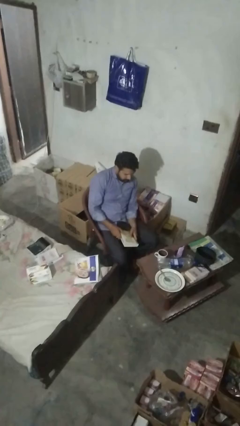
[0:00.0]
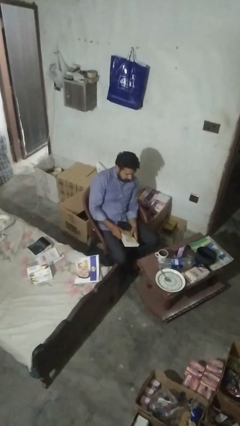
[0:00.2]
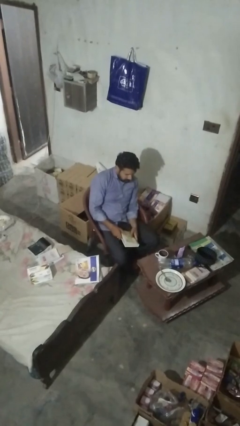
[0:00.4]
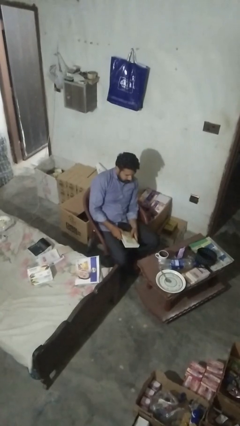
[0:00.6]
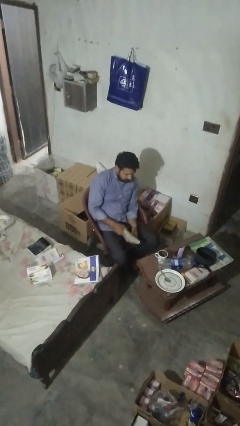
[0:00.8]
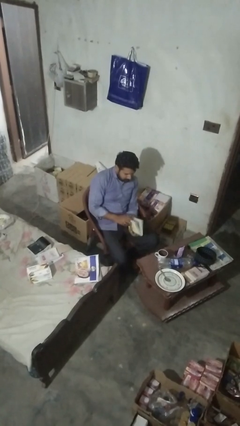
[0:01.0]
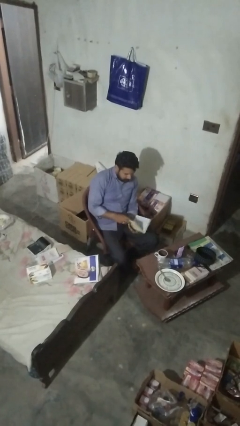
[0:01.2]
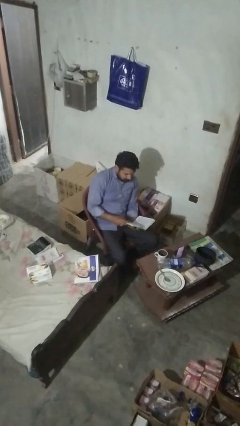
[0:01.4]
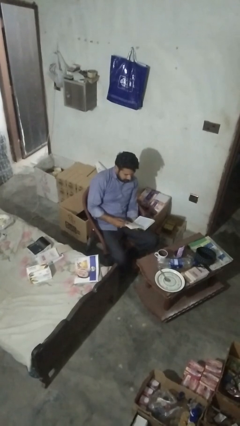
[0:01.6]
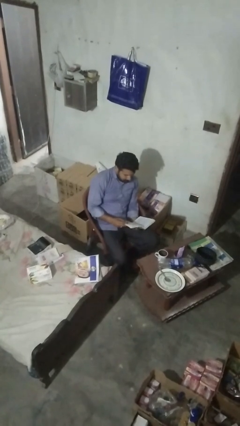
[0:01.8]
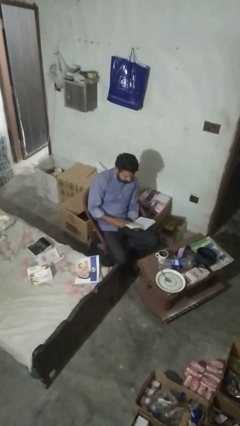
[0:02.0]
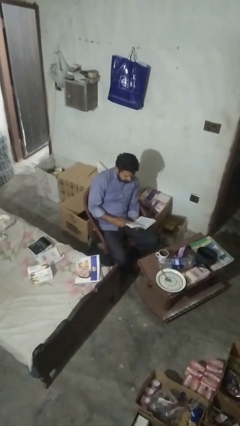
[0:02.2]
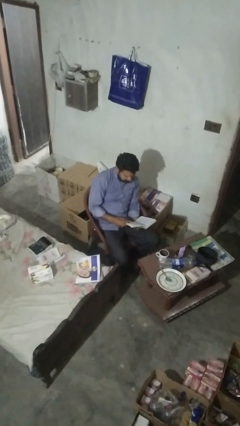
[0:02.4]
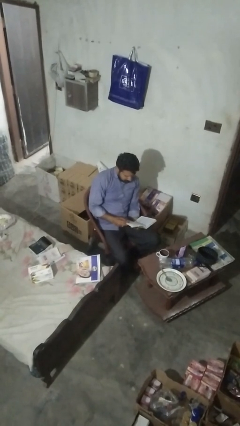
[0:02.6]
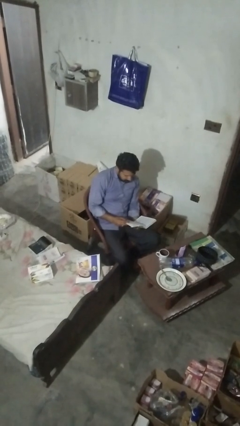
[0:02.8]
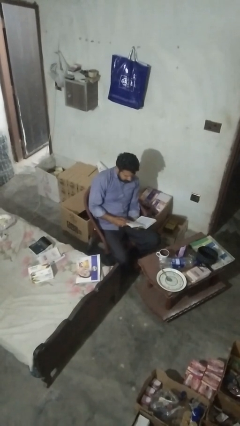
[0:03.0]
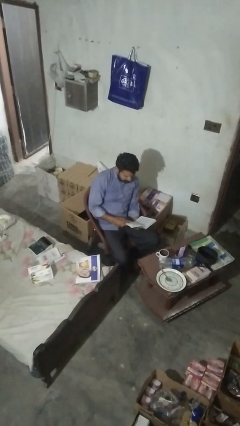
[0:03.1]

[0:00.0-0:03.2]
person reads book

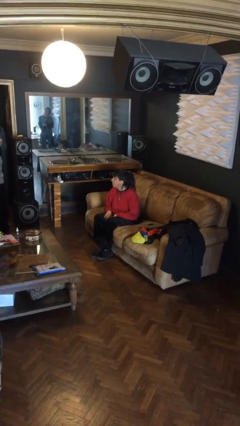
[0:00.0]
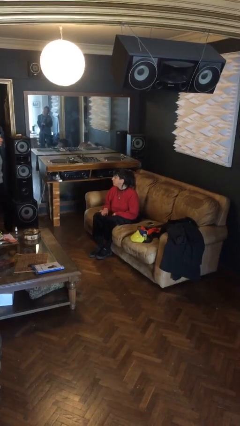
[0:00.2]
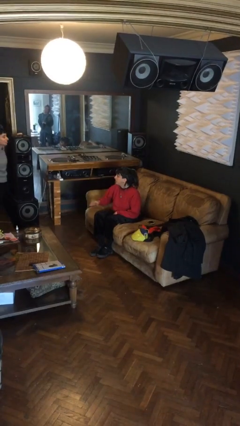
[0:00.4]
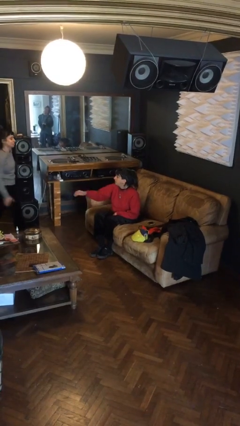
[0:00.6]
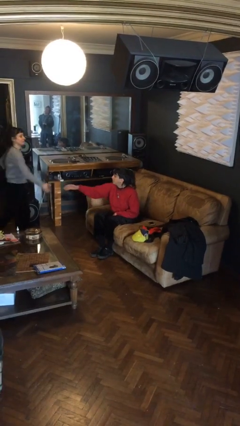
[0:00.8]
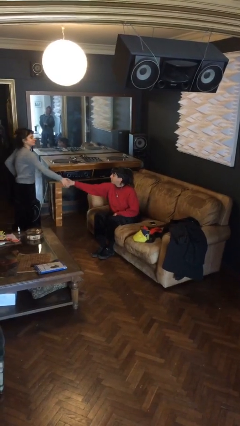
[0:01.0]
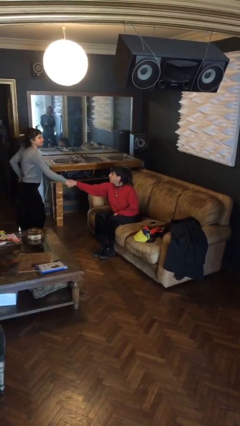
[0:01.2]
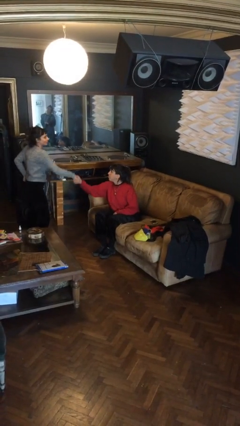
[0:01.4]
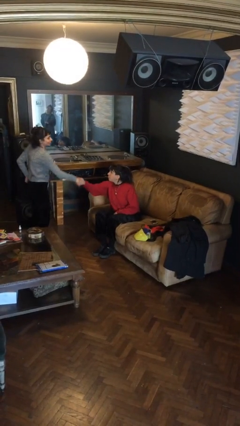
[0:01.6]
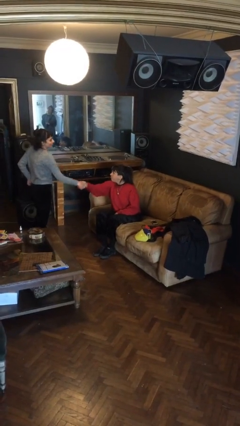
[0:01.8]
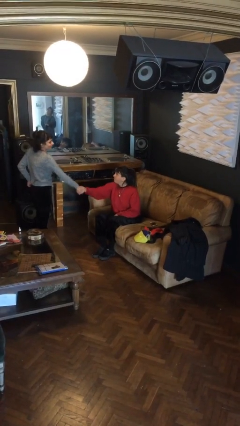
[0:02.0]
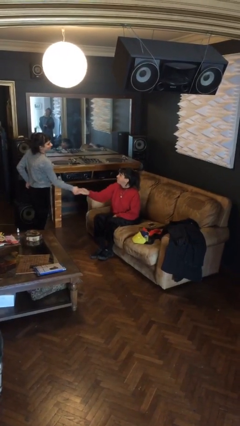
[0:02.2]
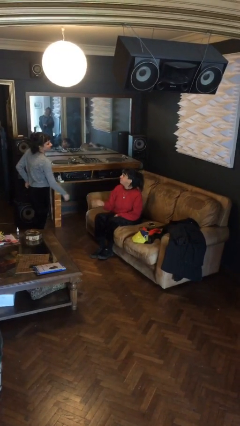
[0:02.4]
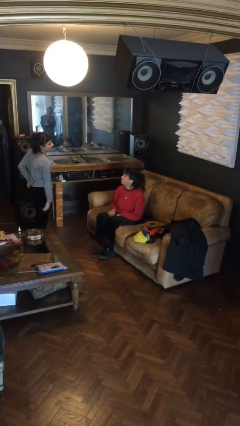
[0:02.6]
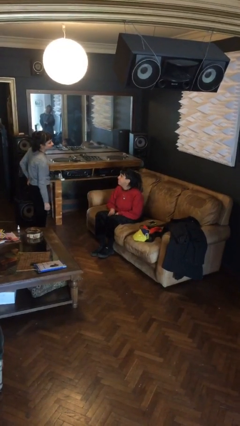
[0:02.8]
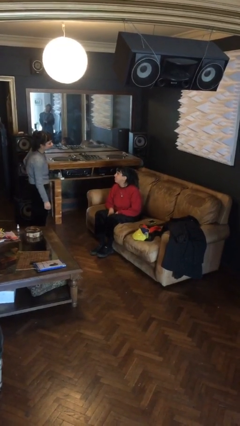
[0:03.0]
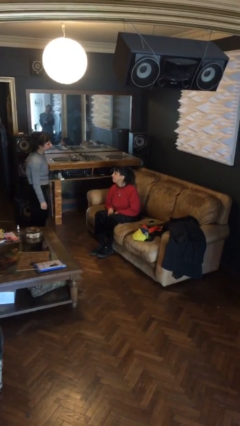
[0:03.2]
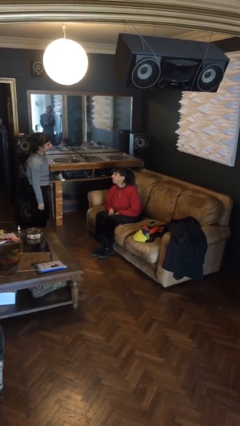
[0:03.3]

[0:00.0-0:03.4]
person shakes hand

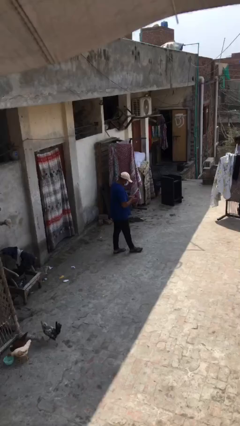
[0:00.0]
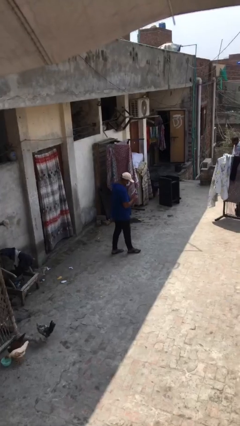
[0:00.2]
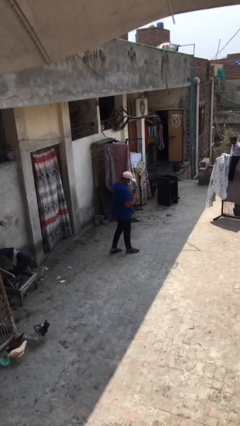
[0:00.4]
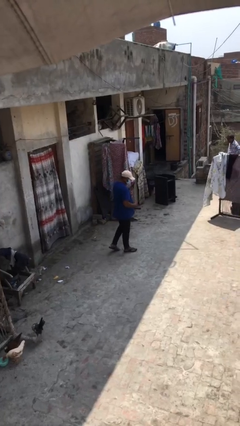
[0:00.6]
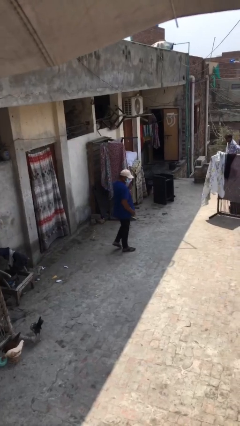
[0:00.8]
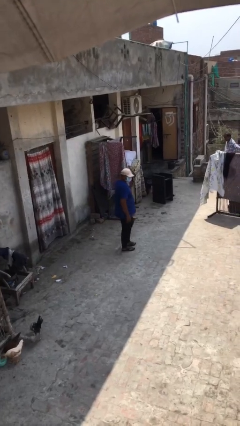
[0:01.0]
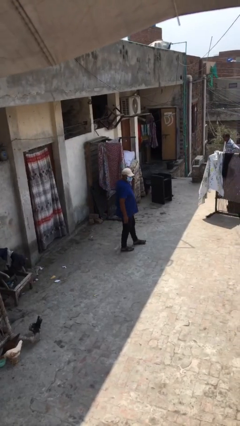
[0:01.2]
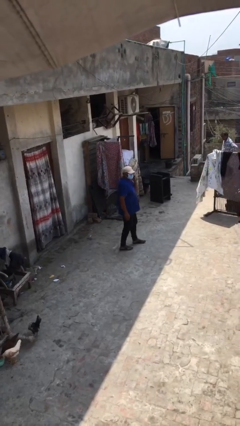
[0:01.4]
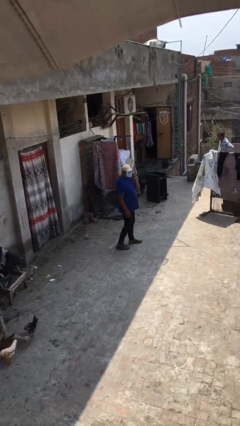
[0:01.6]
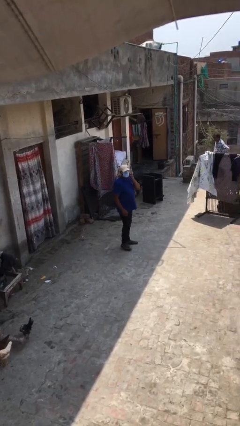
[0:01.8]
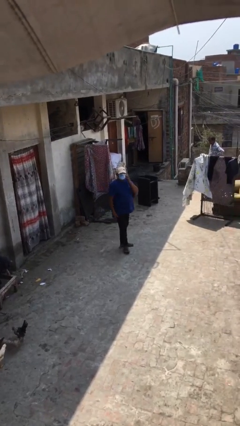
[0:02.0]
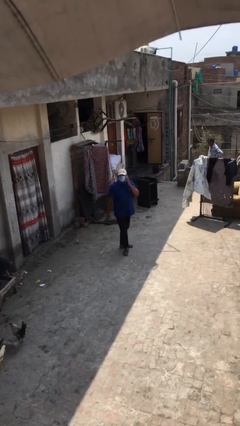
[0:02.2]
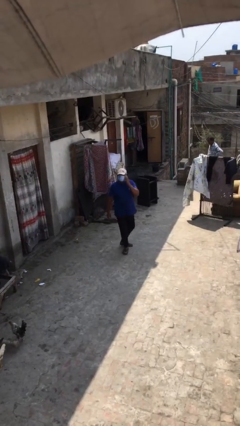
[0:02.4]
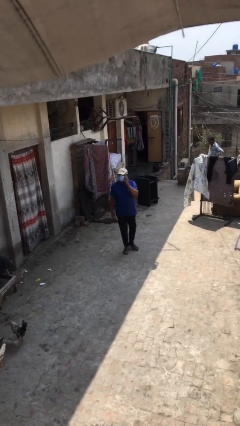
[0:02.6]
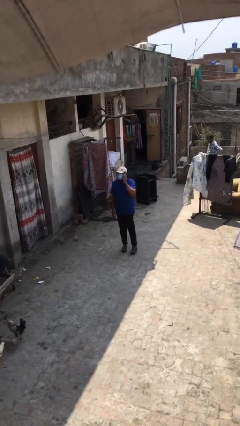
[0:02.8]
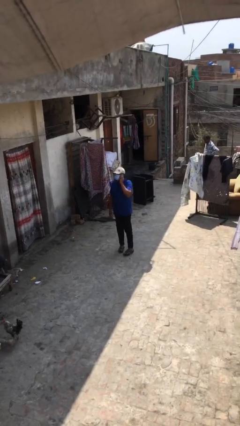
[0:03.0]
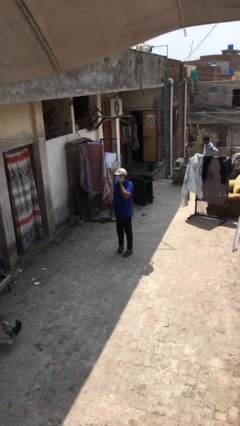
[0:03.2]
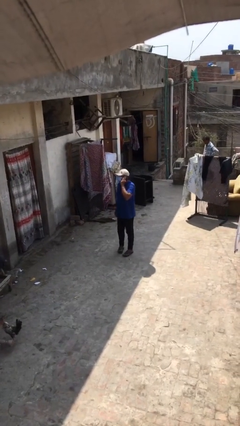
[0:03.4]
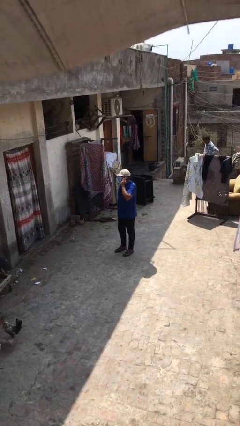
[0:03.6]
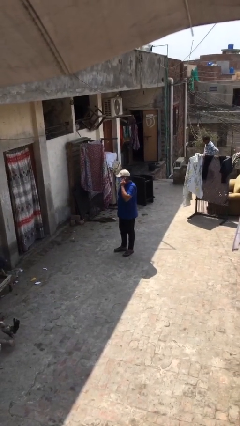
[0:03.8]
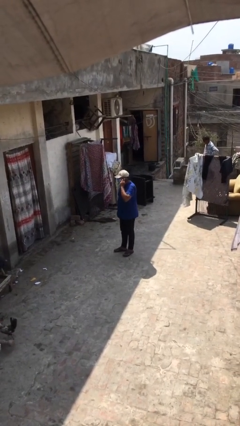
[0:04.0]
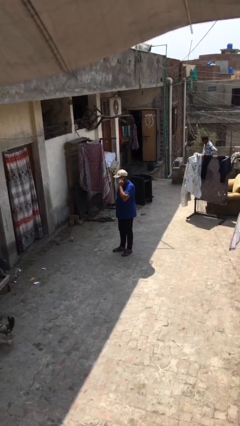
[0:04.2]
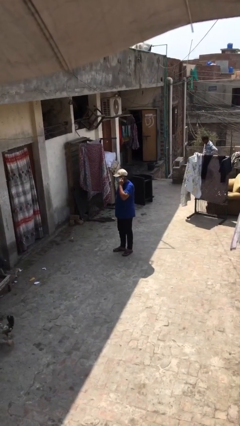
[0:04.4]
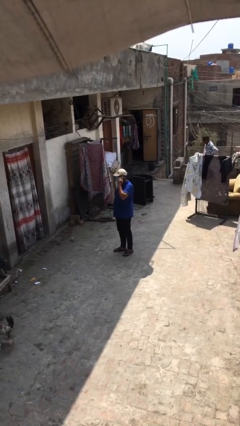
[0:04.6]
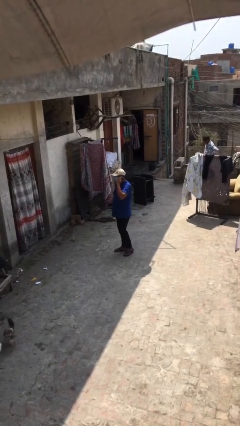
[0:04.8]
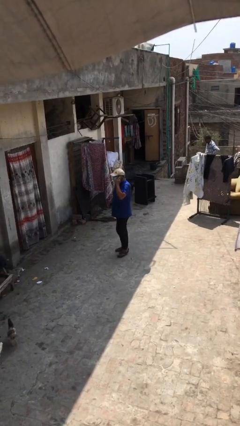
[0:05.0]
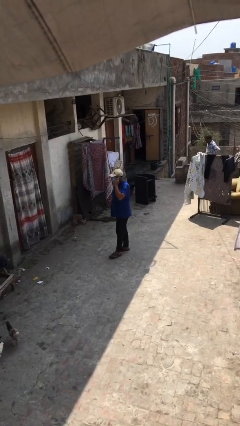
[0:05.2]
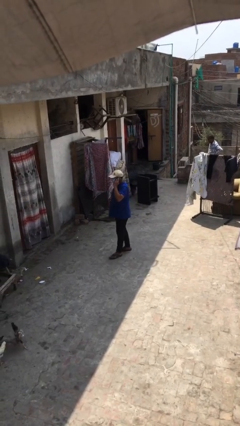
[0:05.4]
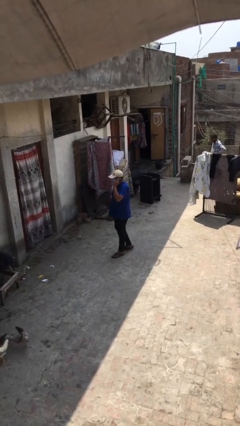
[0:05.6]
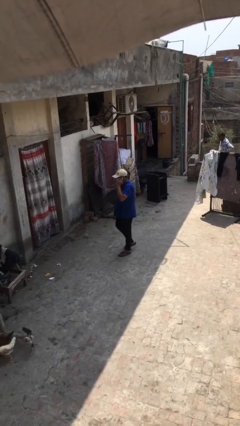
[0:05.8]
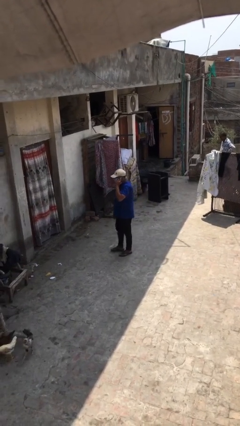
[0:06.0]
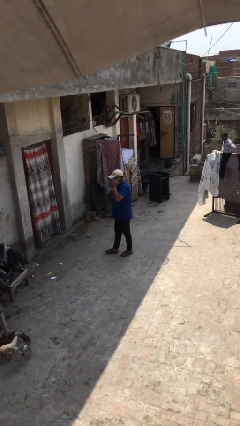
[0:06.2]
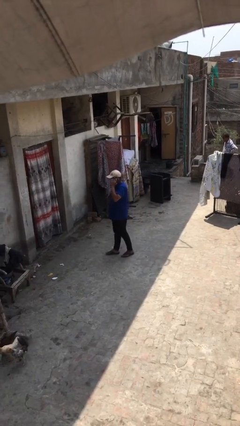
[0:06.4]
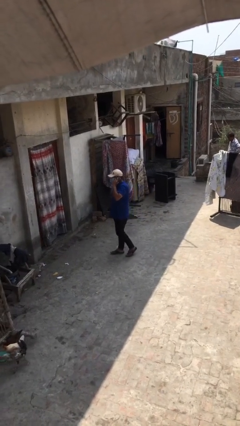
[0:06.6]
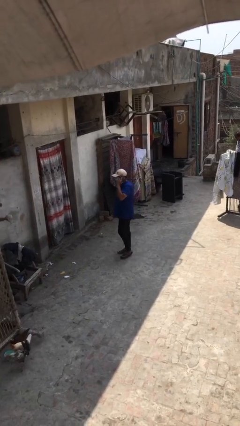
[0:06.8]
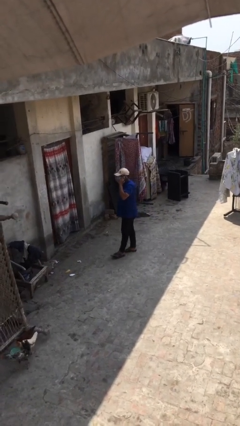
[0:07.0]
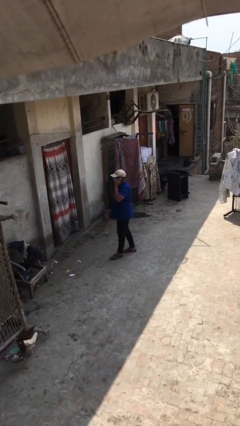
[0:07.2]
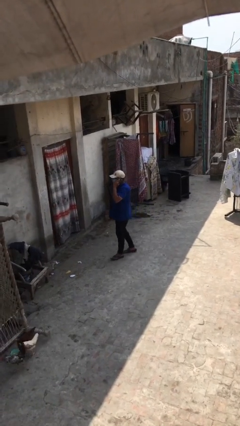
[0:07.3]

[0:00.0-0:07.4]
person talks on phone

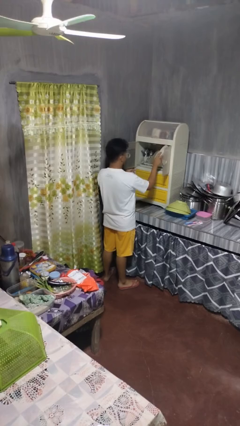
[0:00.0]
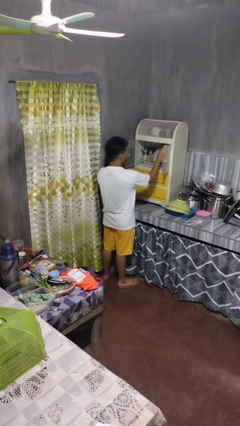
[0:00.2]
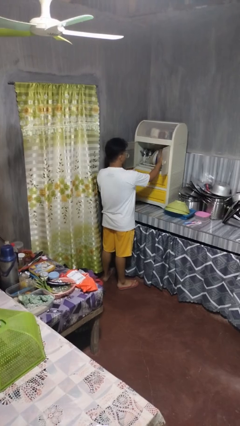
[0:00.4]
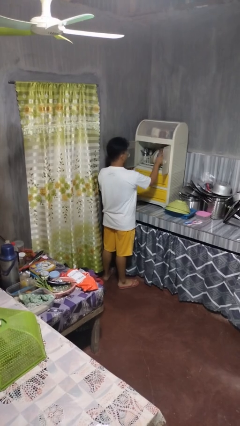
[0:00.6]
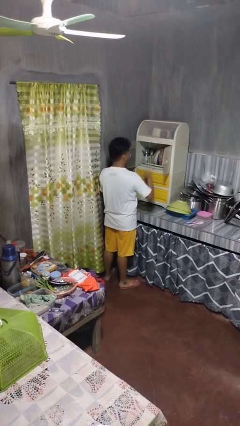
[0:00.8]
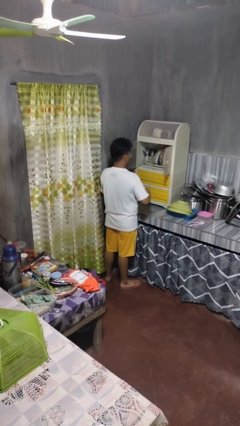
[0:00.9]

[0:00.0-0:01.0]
person puts object in cabinet

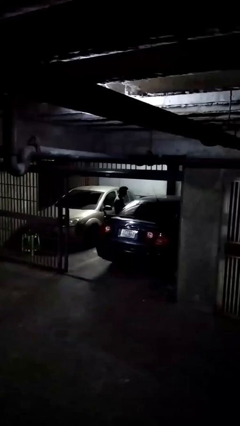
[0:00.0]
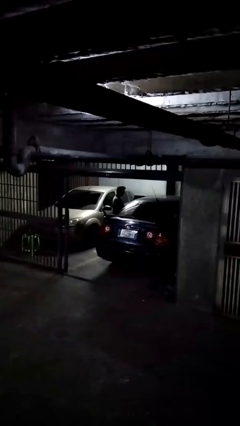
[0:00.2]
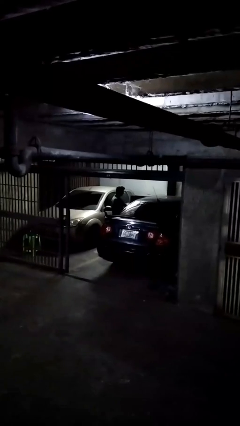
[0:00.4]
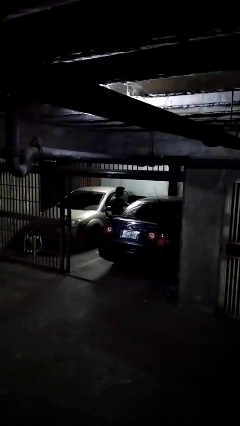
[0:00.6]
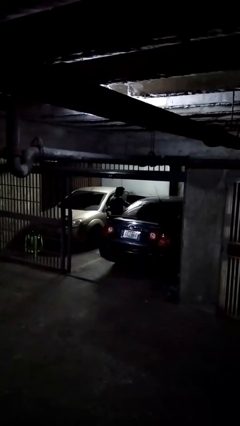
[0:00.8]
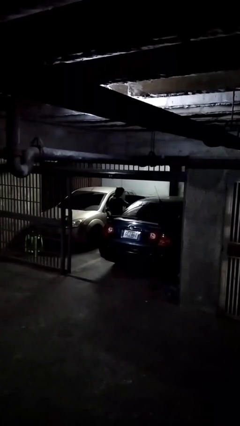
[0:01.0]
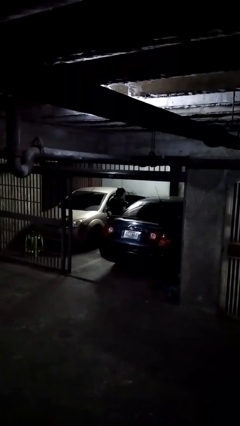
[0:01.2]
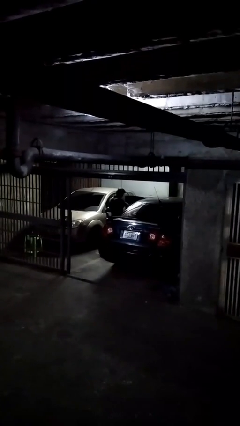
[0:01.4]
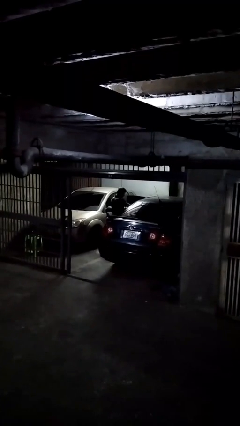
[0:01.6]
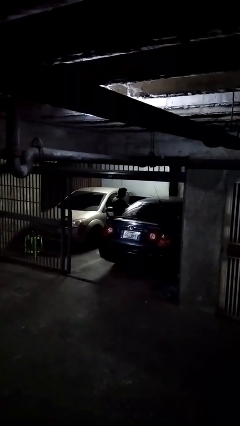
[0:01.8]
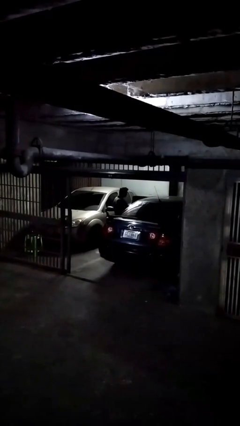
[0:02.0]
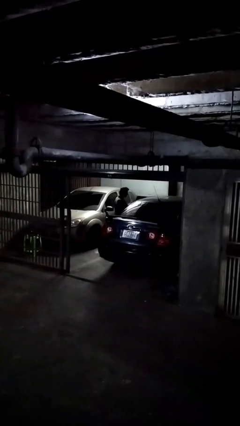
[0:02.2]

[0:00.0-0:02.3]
person opens car door

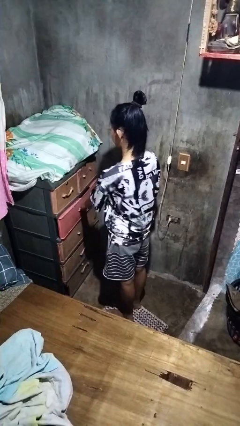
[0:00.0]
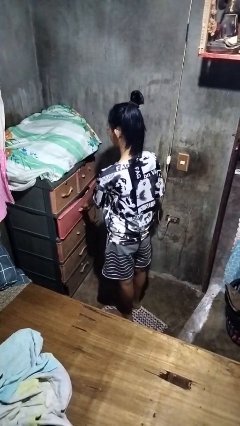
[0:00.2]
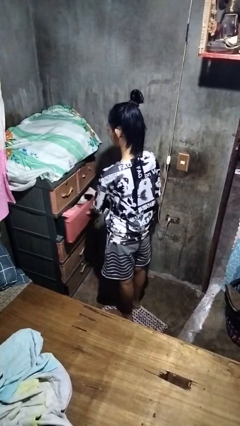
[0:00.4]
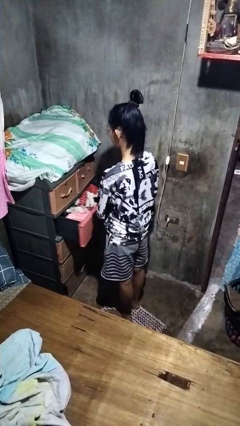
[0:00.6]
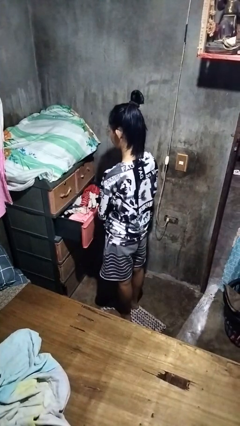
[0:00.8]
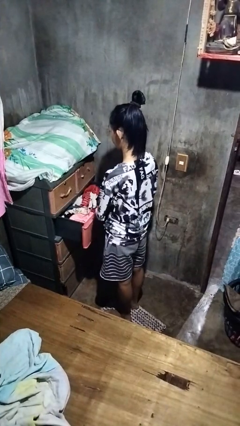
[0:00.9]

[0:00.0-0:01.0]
person opens dresser drawer
